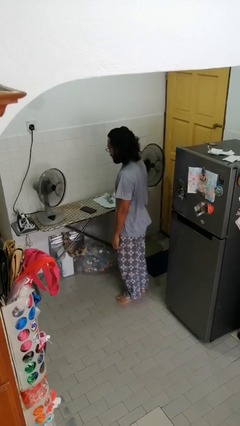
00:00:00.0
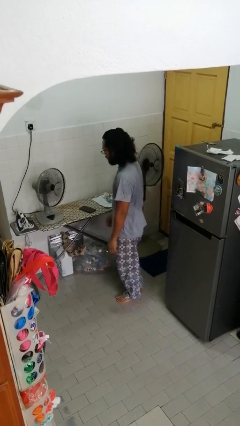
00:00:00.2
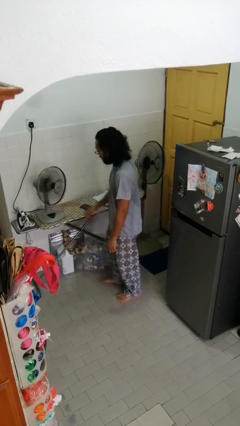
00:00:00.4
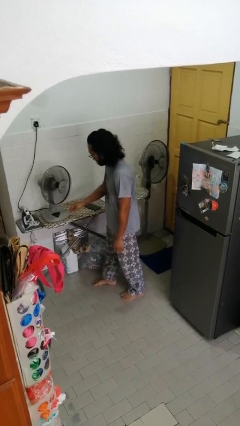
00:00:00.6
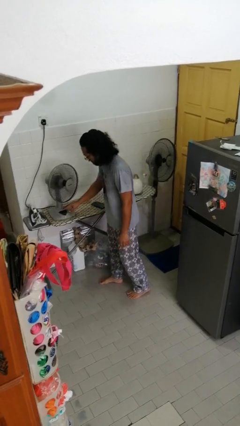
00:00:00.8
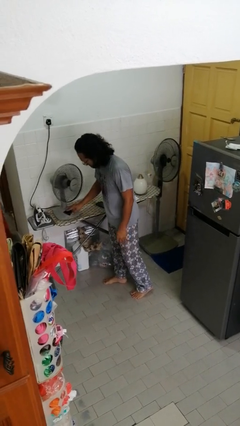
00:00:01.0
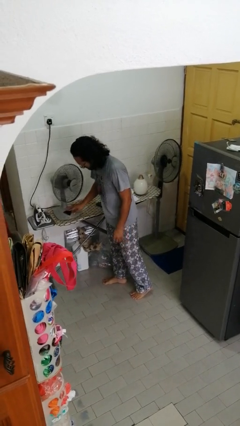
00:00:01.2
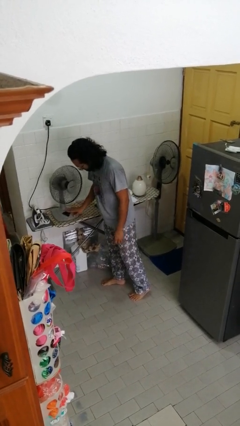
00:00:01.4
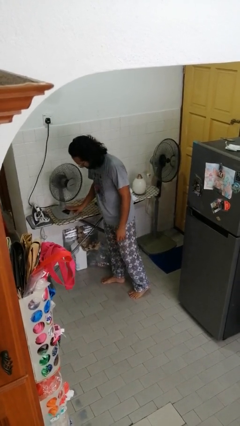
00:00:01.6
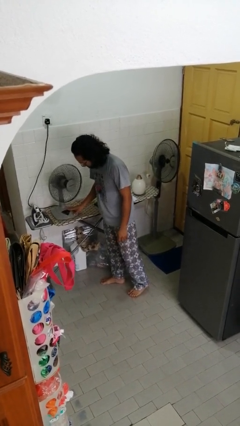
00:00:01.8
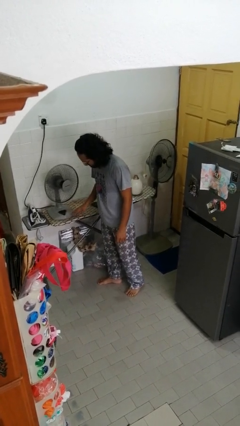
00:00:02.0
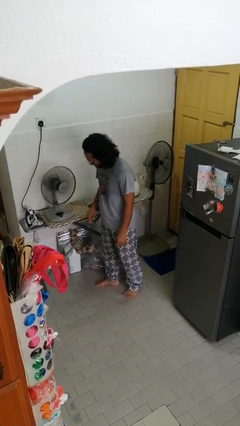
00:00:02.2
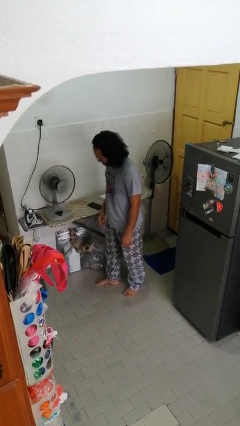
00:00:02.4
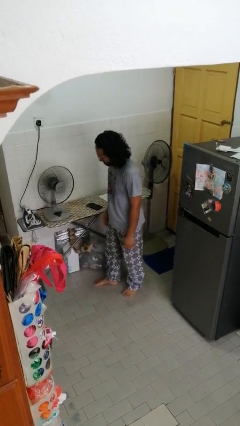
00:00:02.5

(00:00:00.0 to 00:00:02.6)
person turns on fan

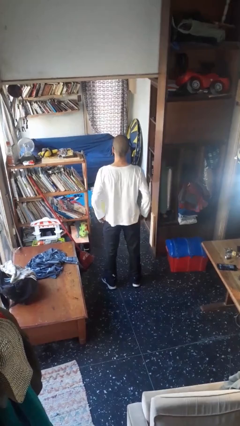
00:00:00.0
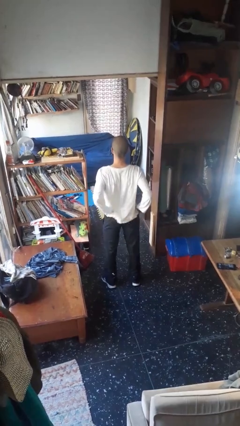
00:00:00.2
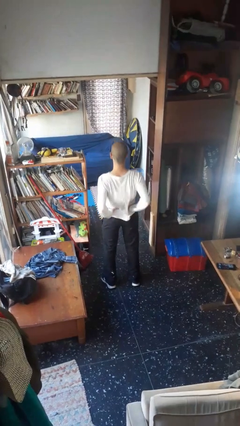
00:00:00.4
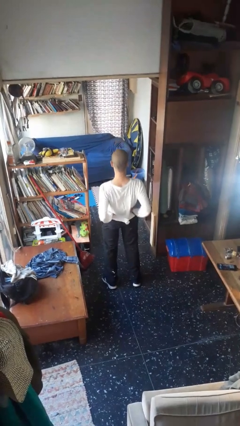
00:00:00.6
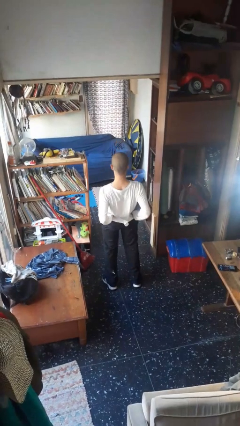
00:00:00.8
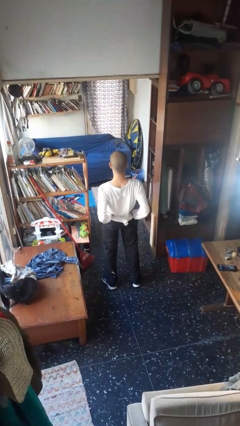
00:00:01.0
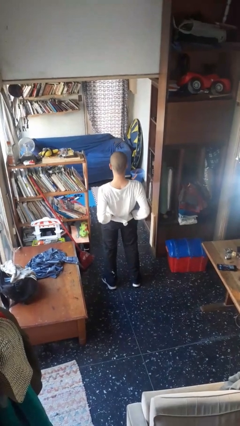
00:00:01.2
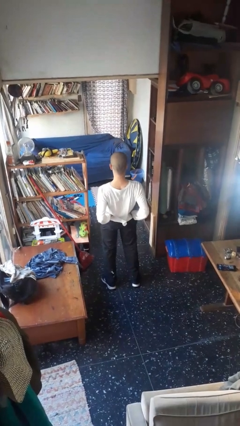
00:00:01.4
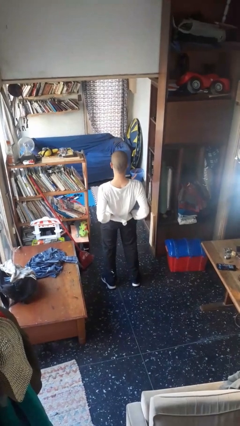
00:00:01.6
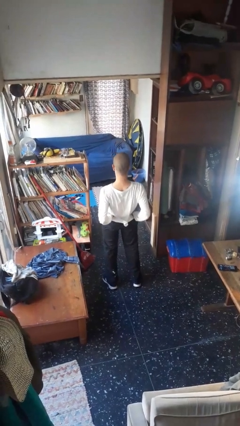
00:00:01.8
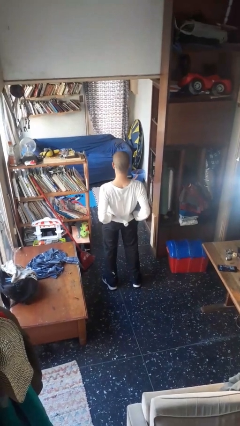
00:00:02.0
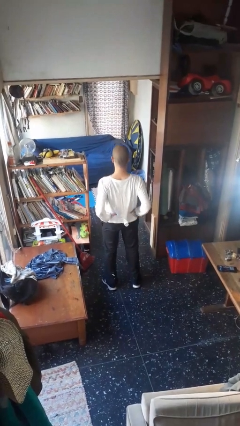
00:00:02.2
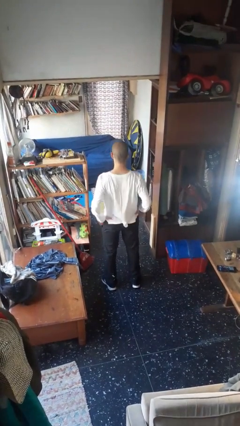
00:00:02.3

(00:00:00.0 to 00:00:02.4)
person stretches back

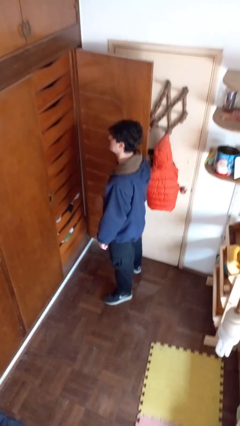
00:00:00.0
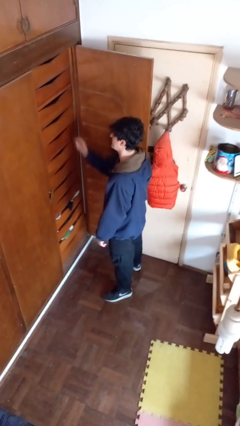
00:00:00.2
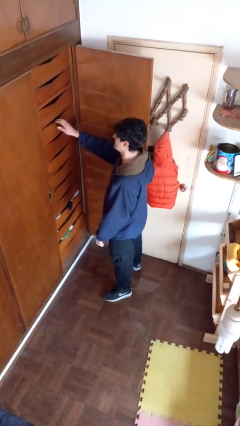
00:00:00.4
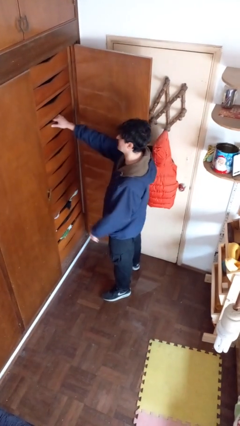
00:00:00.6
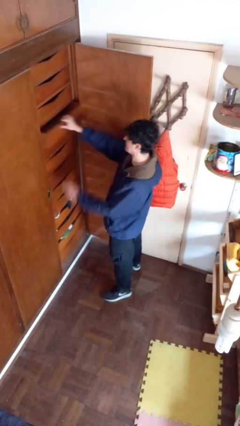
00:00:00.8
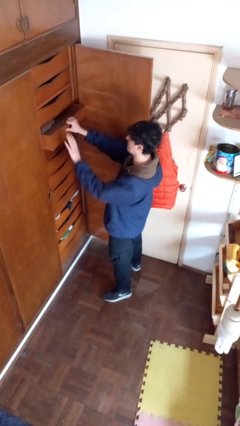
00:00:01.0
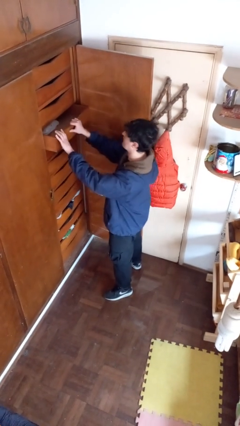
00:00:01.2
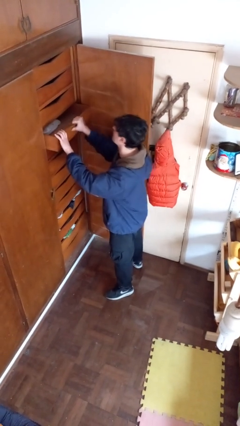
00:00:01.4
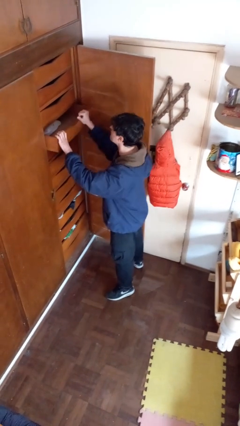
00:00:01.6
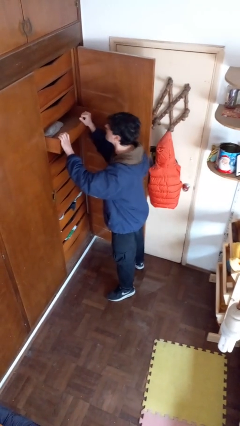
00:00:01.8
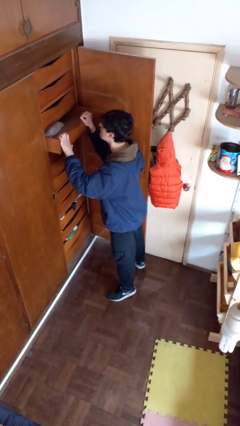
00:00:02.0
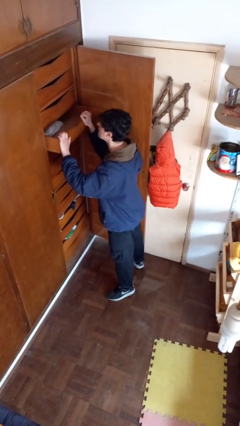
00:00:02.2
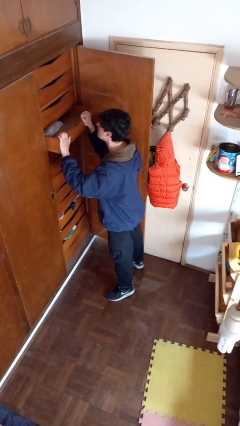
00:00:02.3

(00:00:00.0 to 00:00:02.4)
person opens dresser drawer

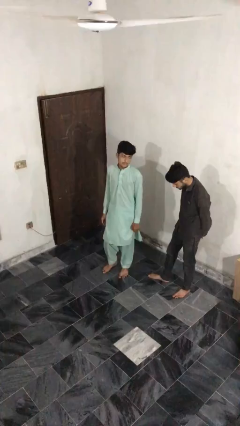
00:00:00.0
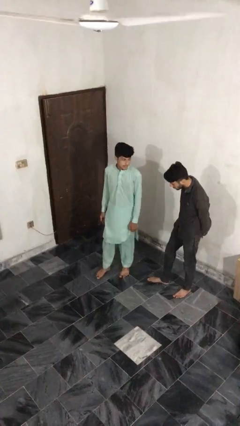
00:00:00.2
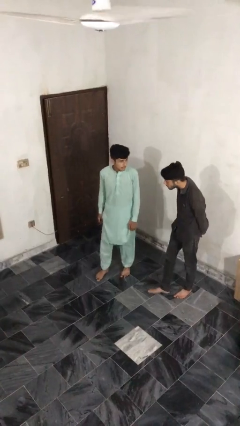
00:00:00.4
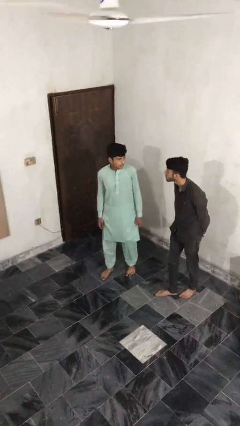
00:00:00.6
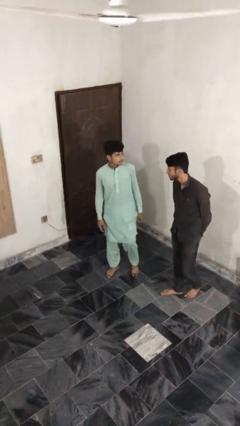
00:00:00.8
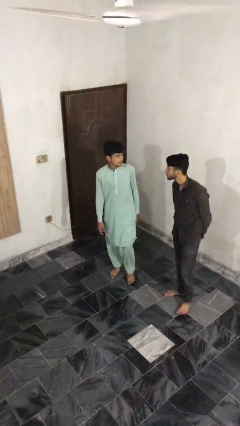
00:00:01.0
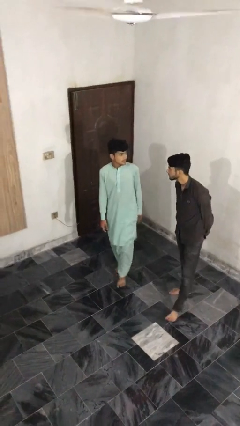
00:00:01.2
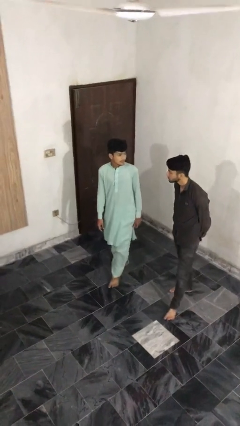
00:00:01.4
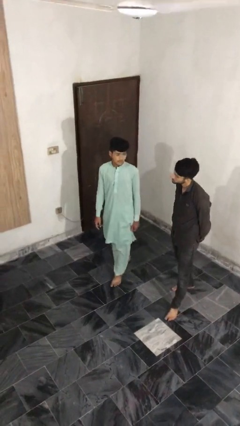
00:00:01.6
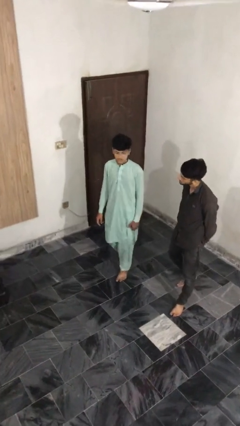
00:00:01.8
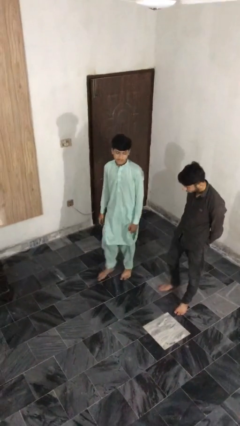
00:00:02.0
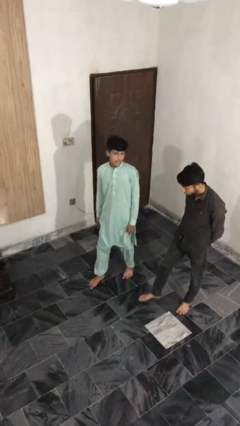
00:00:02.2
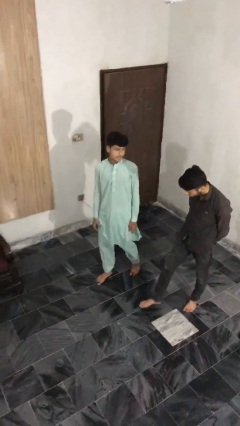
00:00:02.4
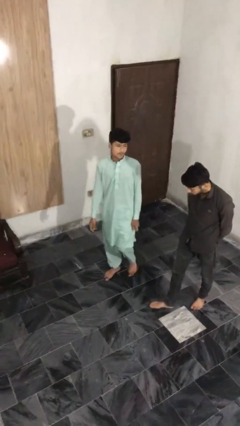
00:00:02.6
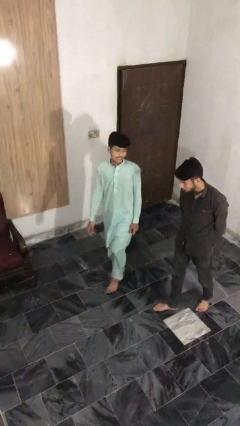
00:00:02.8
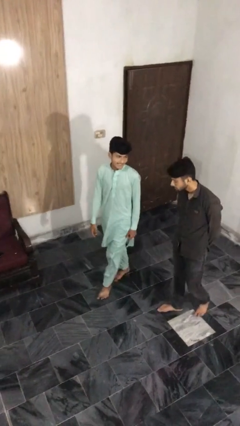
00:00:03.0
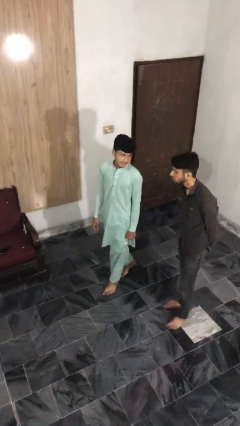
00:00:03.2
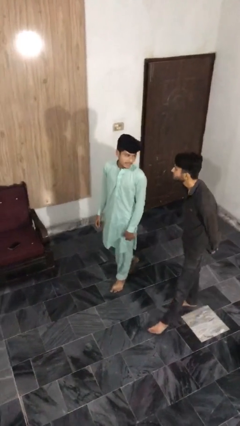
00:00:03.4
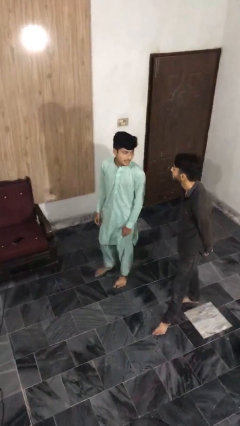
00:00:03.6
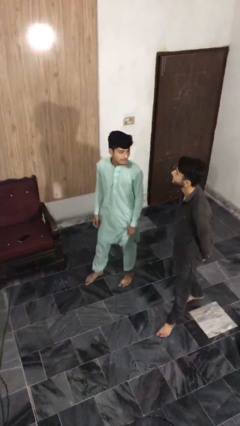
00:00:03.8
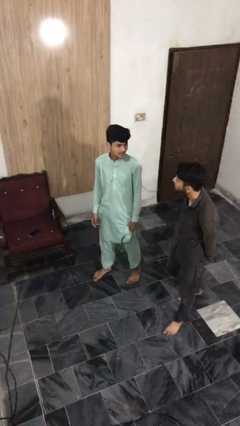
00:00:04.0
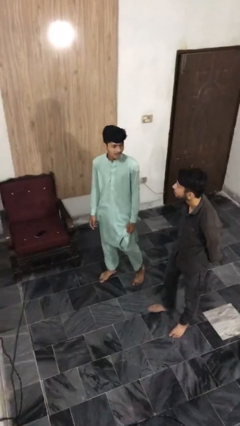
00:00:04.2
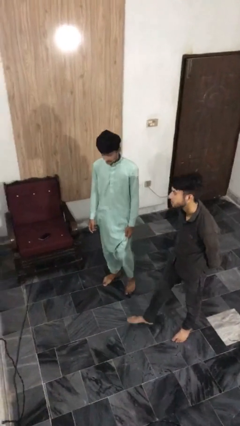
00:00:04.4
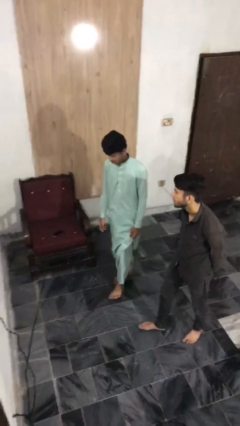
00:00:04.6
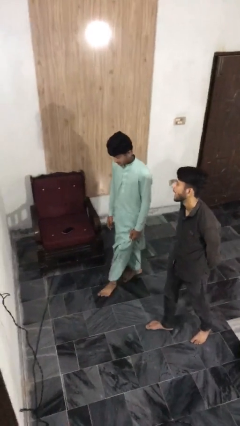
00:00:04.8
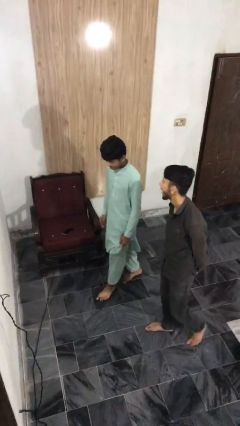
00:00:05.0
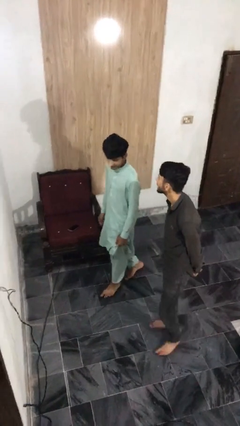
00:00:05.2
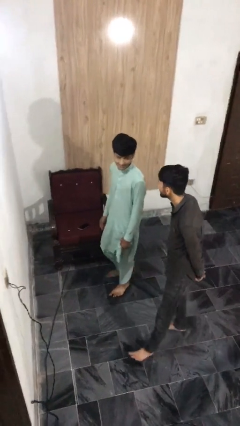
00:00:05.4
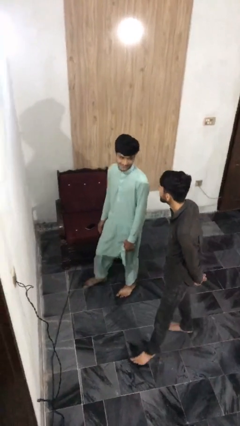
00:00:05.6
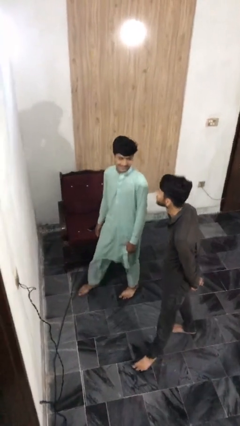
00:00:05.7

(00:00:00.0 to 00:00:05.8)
person talks to person

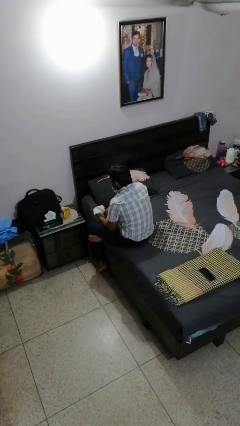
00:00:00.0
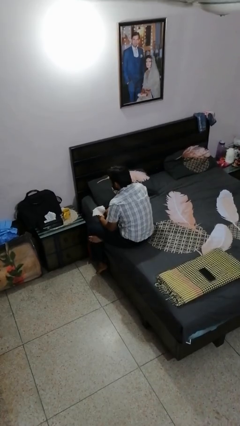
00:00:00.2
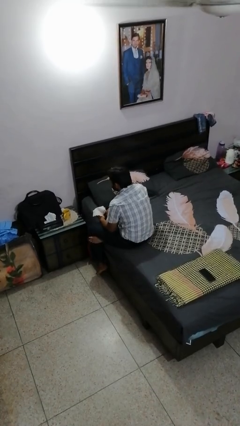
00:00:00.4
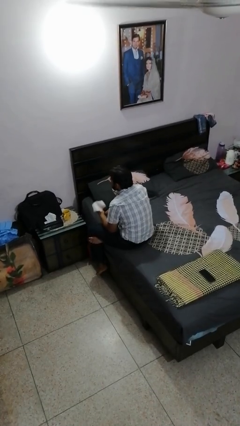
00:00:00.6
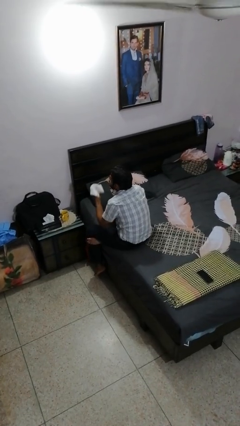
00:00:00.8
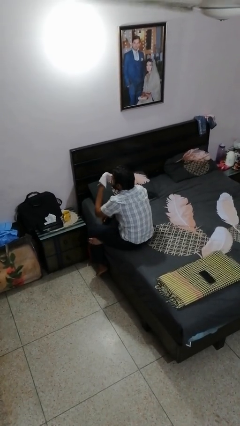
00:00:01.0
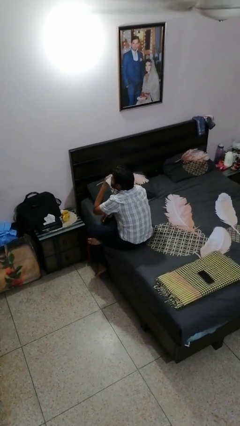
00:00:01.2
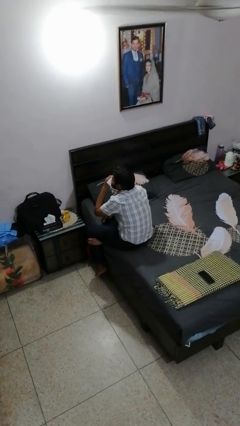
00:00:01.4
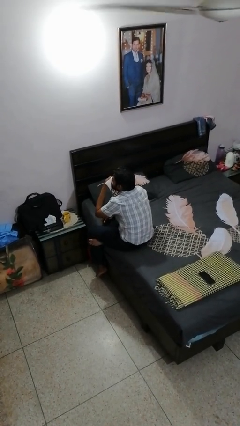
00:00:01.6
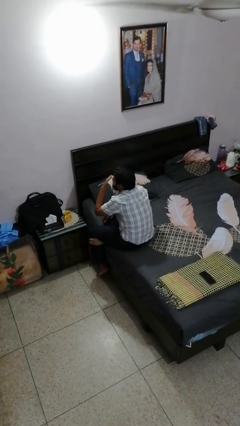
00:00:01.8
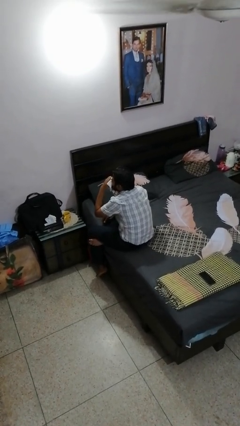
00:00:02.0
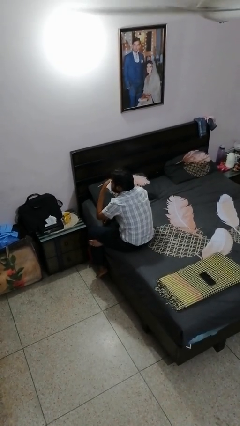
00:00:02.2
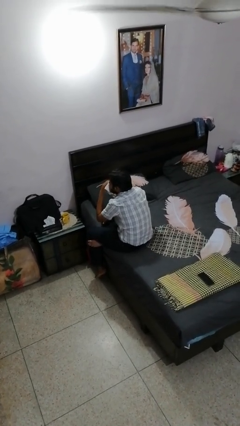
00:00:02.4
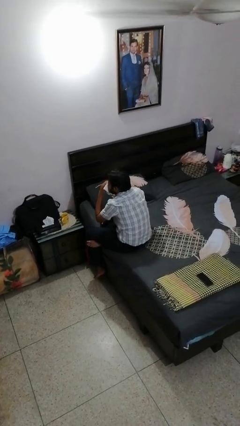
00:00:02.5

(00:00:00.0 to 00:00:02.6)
person blows nose

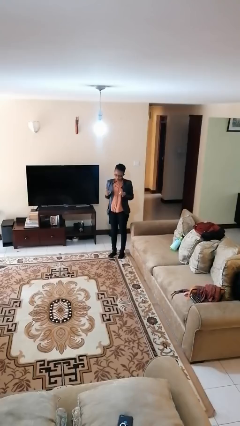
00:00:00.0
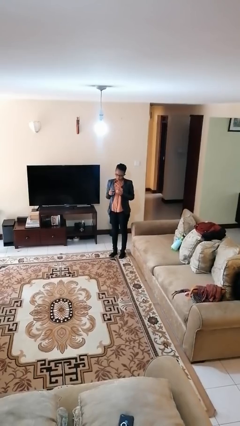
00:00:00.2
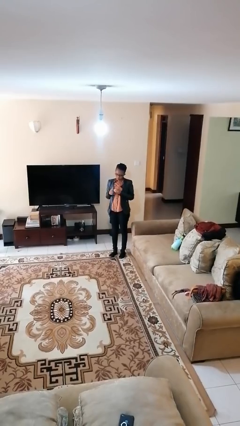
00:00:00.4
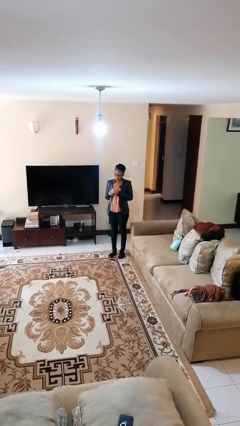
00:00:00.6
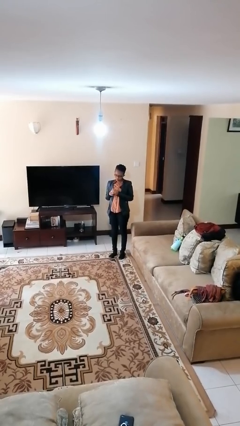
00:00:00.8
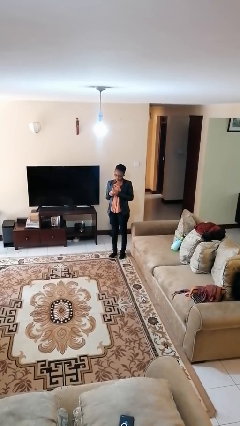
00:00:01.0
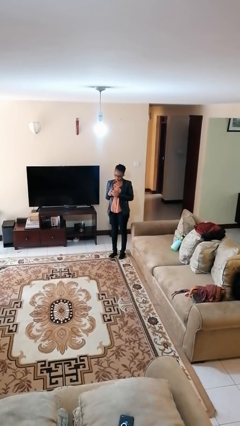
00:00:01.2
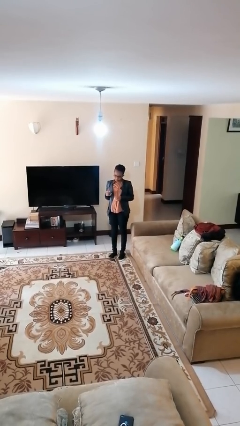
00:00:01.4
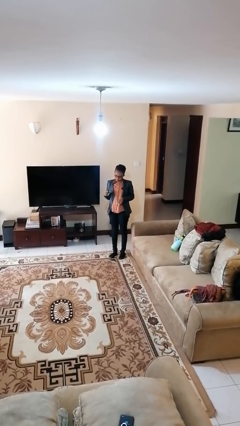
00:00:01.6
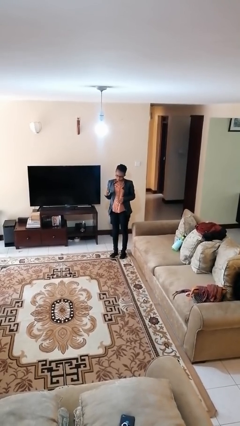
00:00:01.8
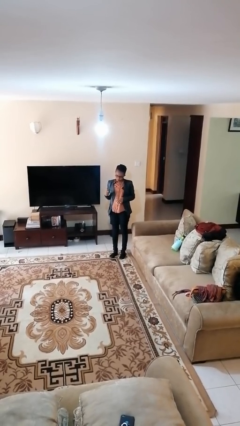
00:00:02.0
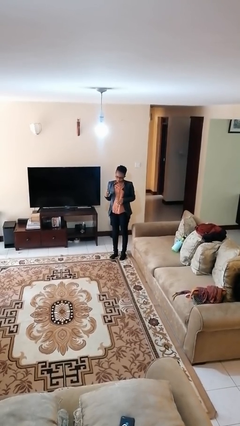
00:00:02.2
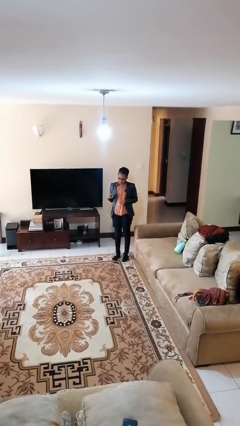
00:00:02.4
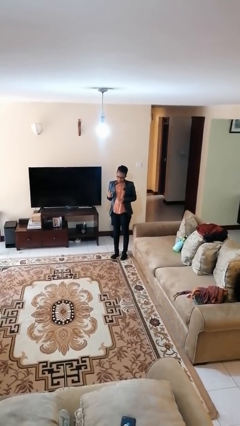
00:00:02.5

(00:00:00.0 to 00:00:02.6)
person puts on ring
